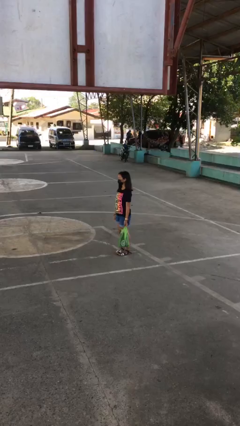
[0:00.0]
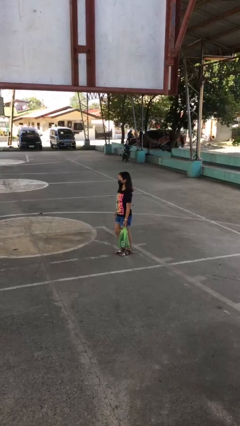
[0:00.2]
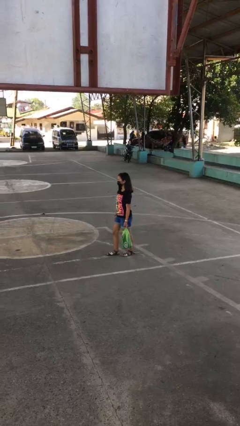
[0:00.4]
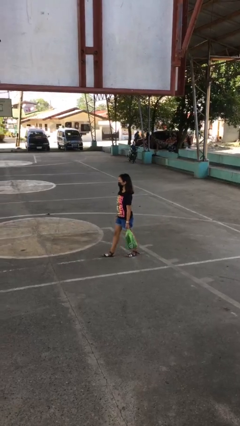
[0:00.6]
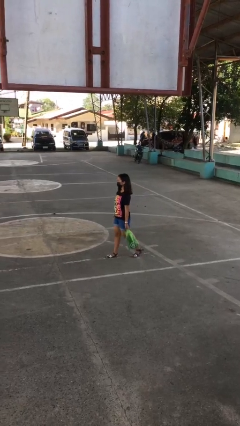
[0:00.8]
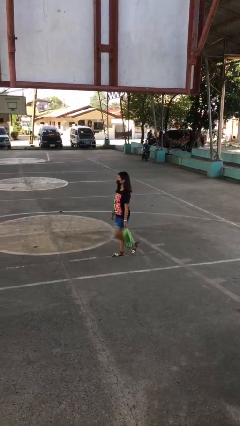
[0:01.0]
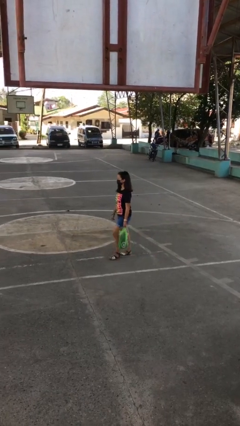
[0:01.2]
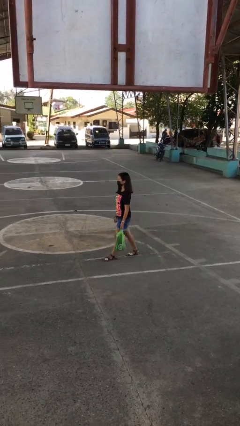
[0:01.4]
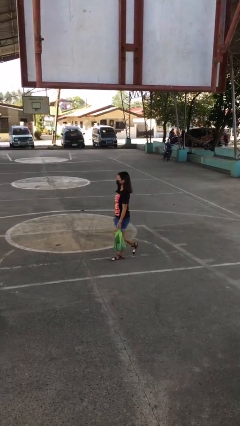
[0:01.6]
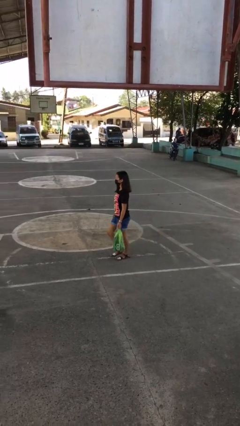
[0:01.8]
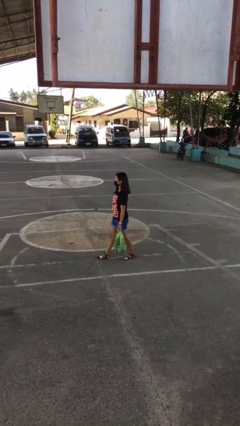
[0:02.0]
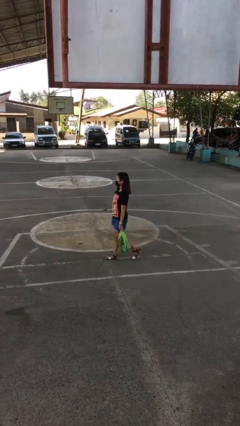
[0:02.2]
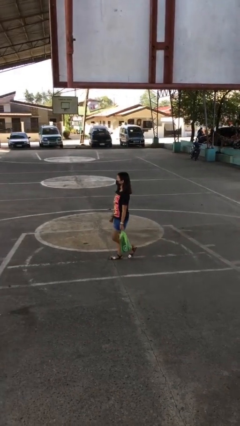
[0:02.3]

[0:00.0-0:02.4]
person carries groceries

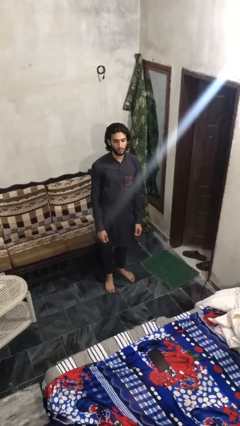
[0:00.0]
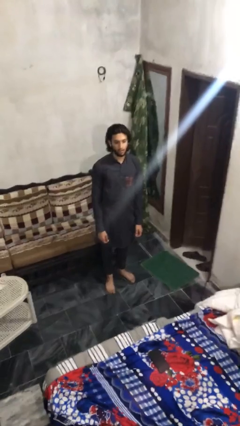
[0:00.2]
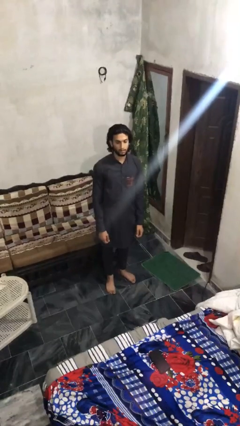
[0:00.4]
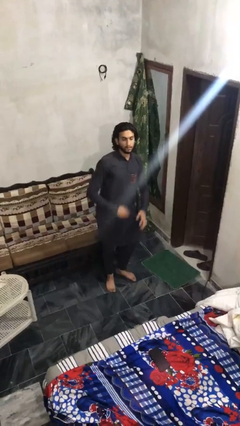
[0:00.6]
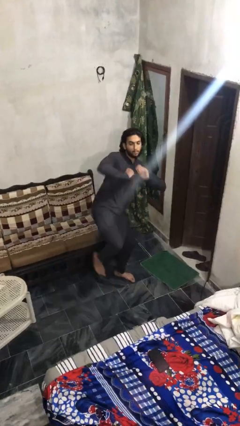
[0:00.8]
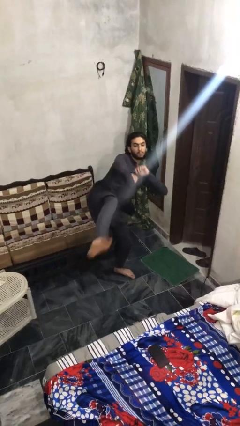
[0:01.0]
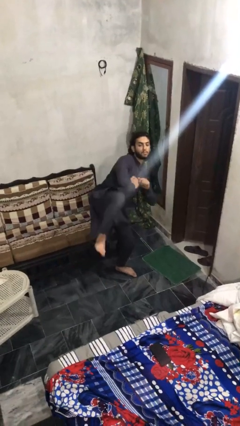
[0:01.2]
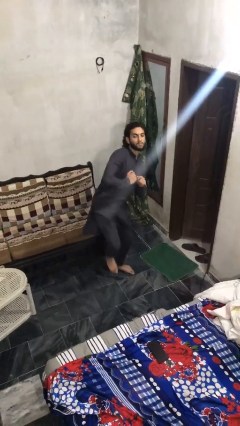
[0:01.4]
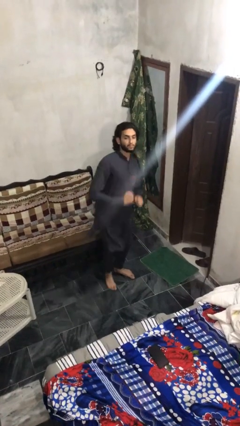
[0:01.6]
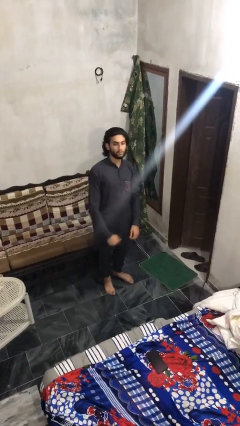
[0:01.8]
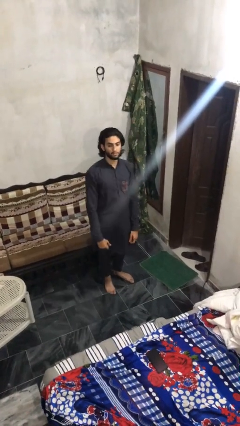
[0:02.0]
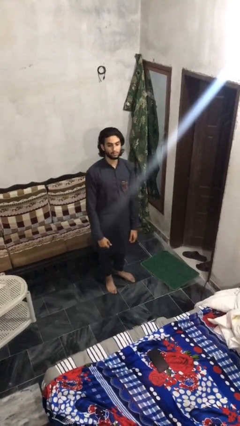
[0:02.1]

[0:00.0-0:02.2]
person karate kicks

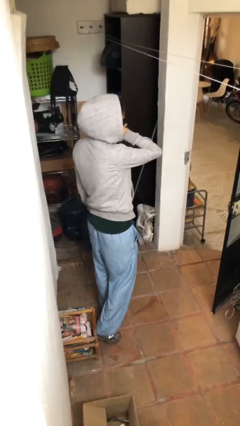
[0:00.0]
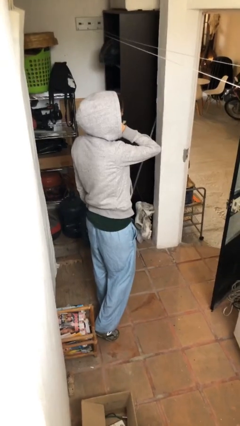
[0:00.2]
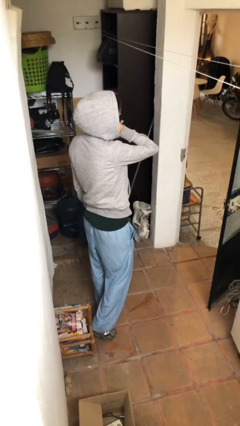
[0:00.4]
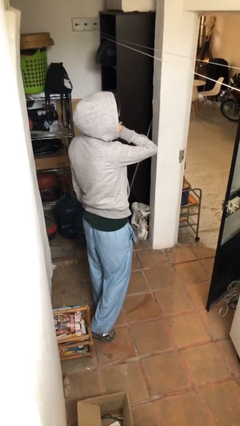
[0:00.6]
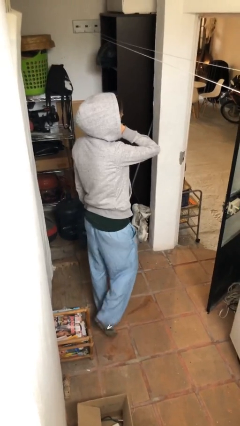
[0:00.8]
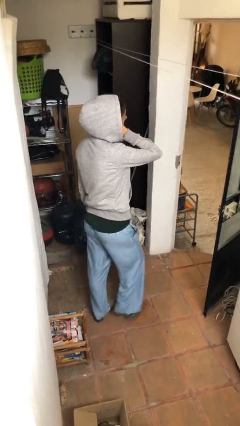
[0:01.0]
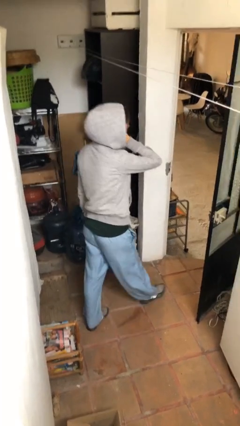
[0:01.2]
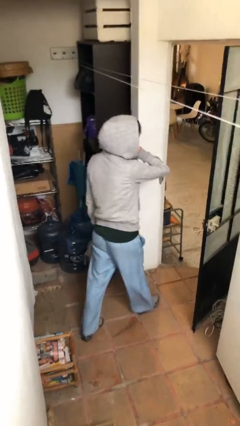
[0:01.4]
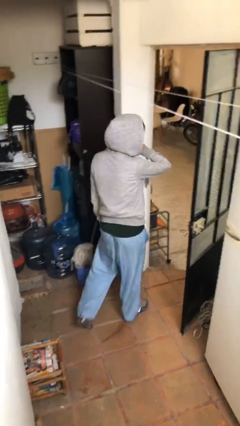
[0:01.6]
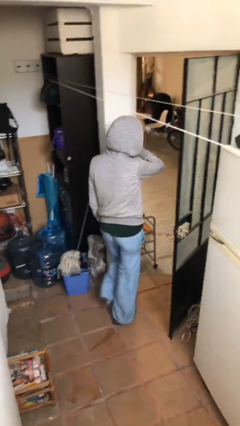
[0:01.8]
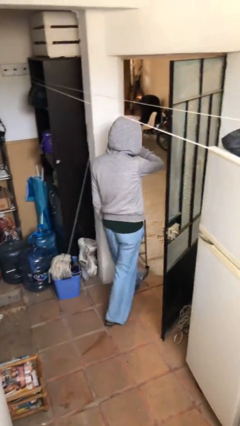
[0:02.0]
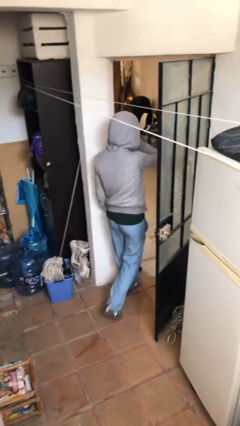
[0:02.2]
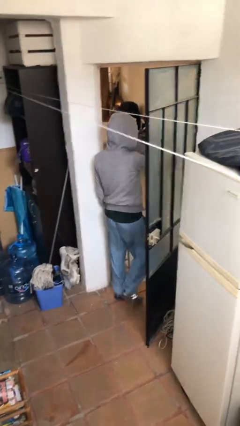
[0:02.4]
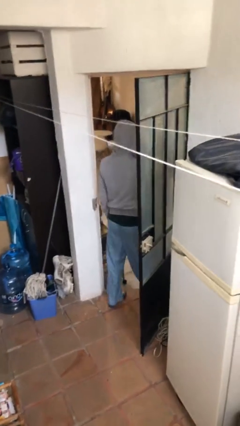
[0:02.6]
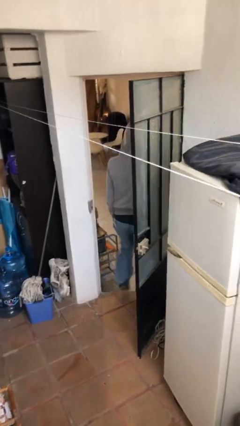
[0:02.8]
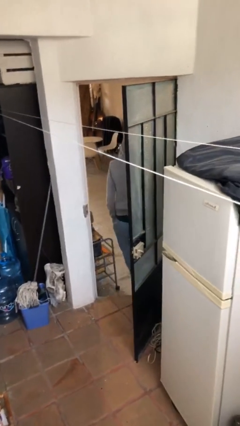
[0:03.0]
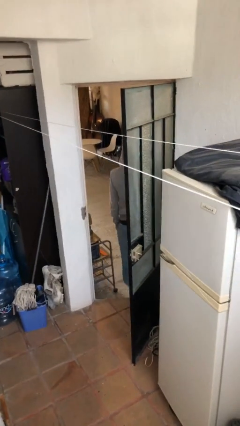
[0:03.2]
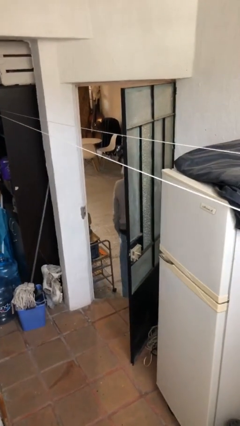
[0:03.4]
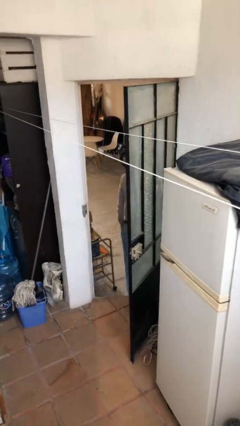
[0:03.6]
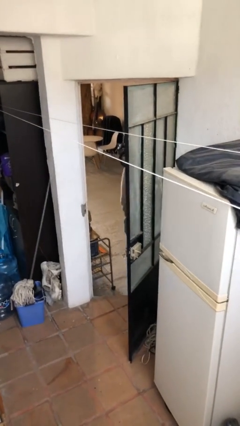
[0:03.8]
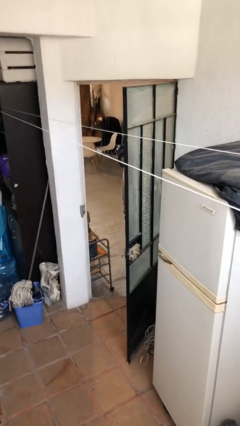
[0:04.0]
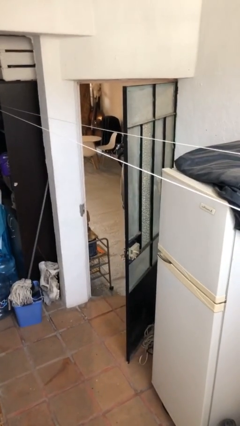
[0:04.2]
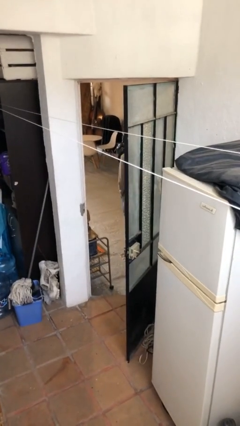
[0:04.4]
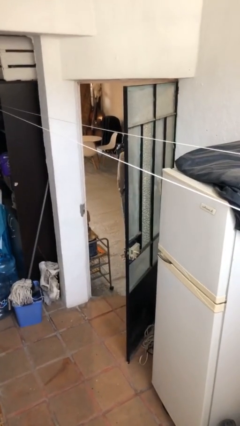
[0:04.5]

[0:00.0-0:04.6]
person exits scene through structure

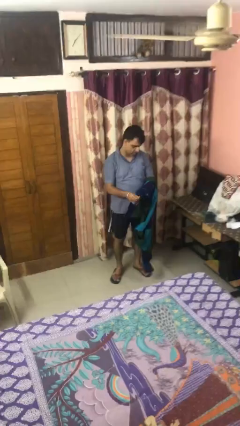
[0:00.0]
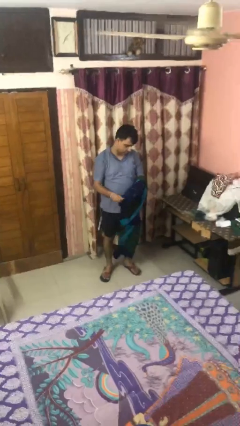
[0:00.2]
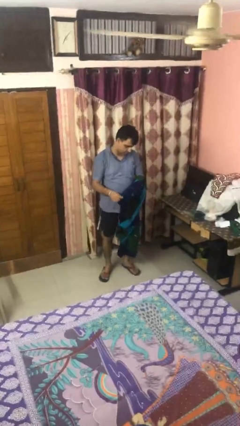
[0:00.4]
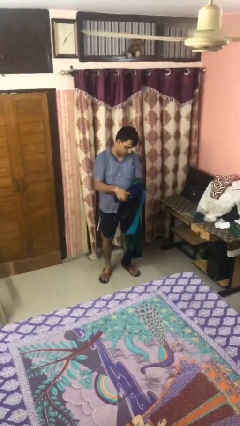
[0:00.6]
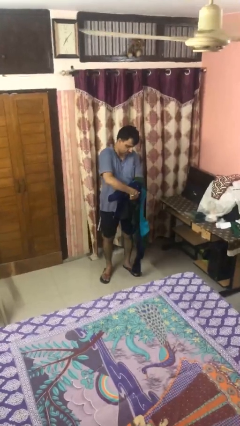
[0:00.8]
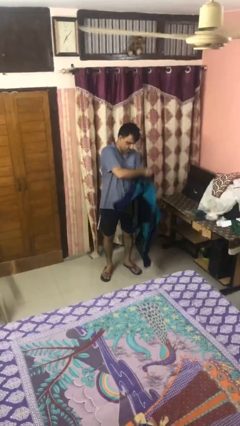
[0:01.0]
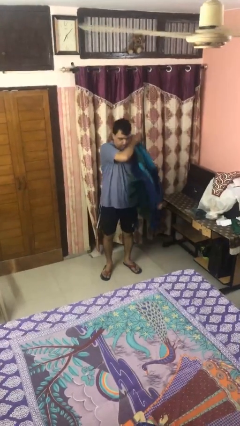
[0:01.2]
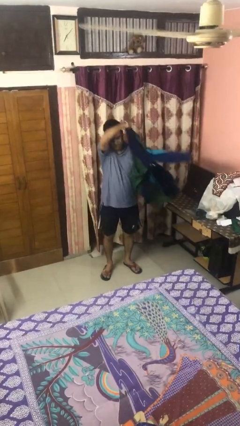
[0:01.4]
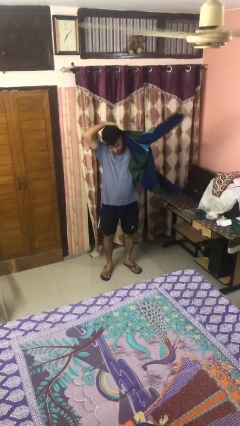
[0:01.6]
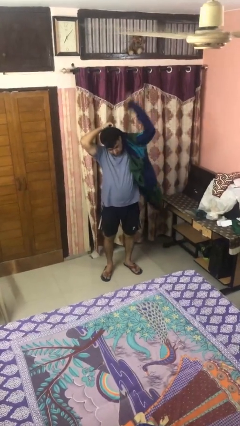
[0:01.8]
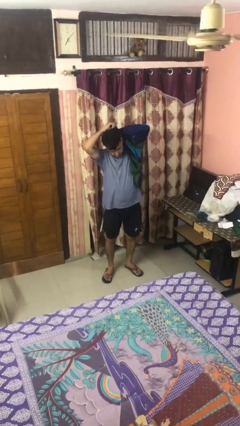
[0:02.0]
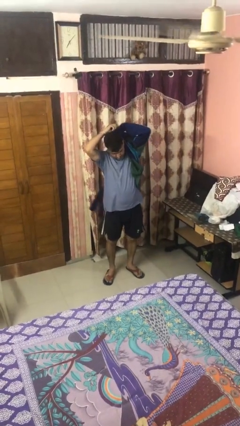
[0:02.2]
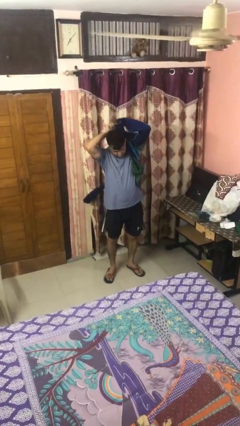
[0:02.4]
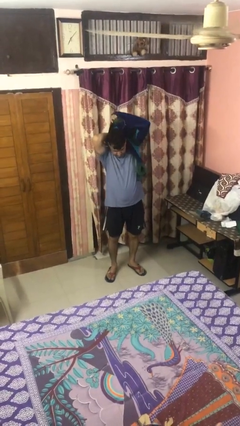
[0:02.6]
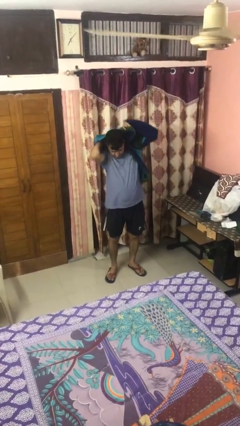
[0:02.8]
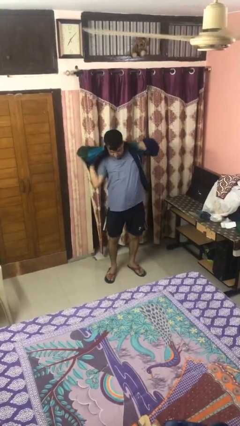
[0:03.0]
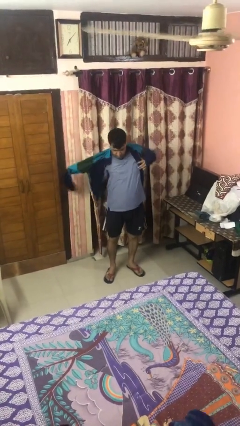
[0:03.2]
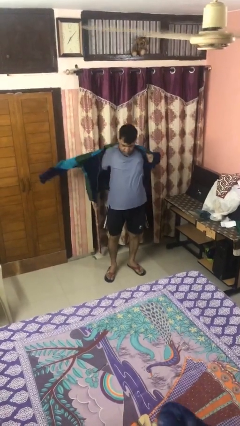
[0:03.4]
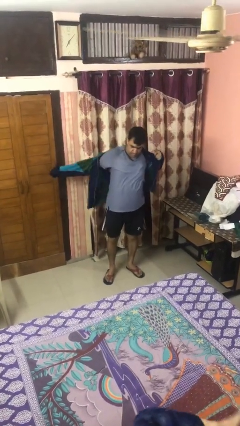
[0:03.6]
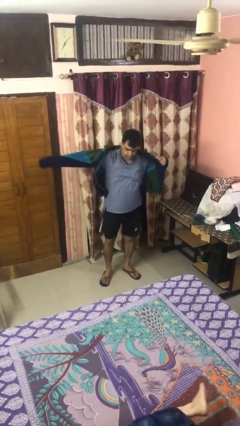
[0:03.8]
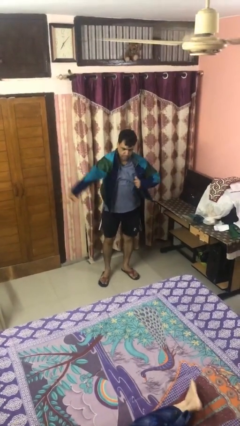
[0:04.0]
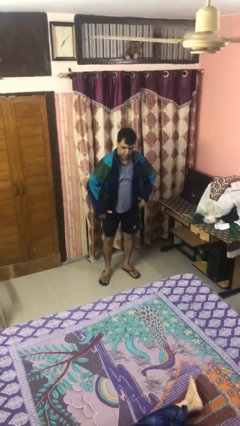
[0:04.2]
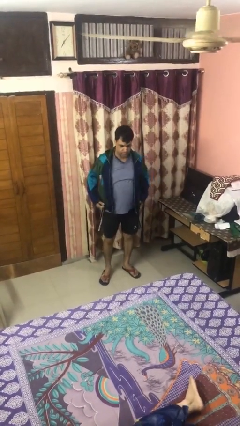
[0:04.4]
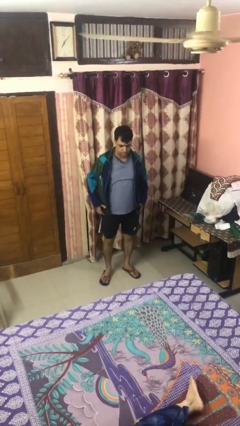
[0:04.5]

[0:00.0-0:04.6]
person puts on jacket

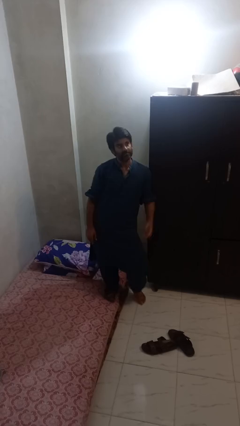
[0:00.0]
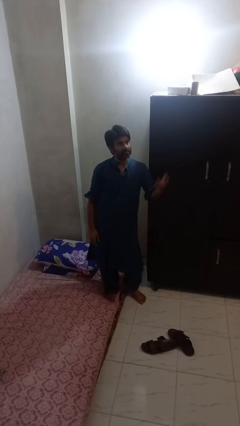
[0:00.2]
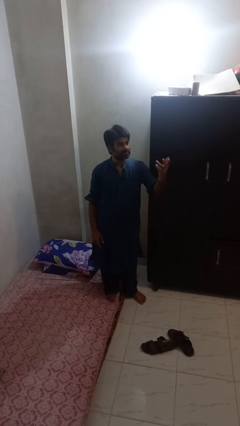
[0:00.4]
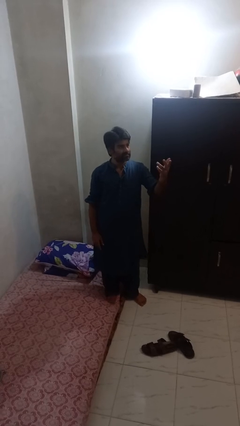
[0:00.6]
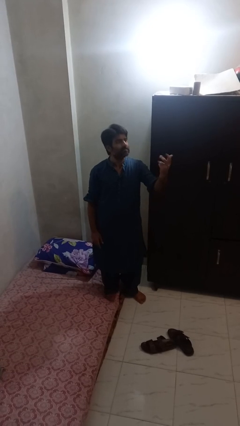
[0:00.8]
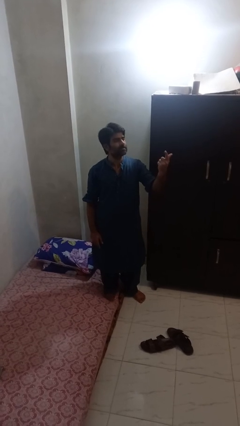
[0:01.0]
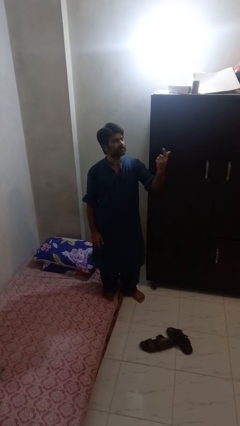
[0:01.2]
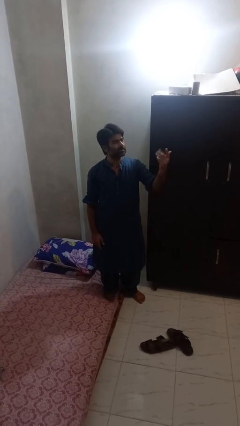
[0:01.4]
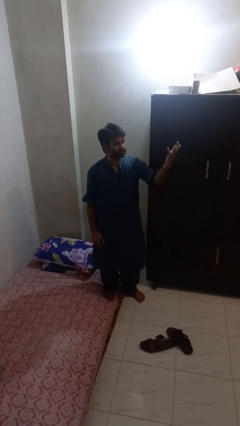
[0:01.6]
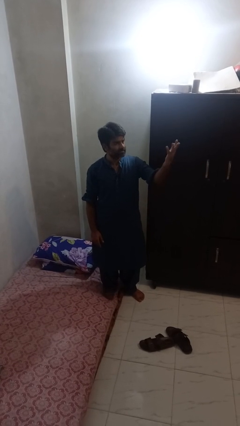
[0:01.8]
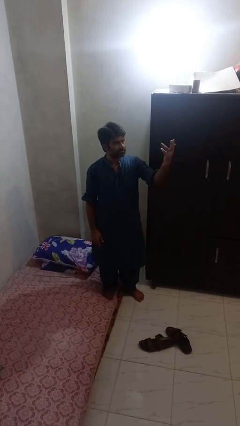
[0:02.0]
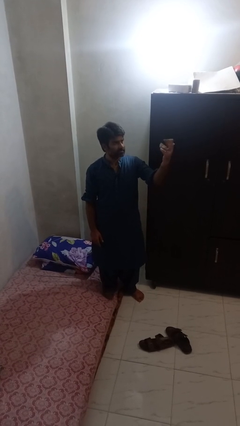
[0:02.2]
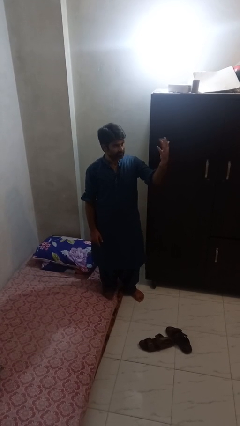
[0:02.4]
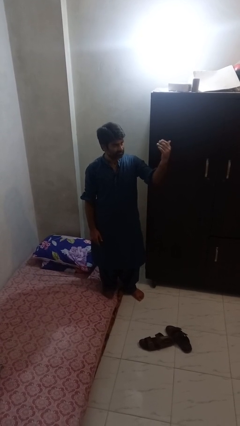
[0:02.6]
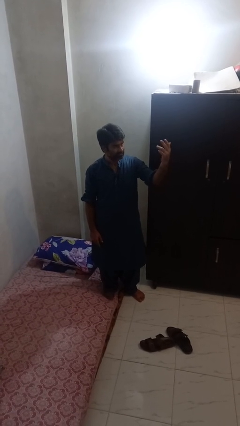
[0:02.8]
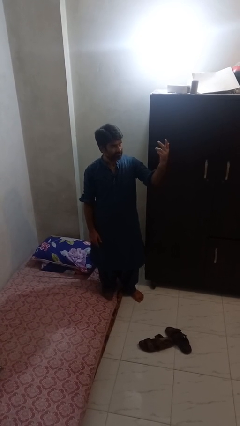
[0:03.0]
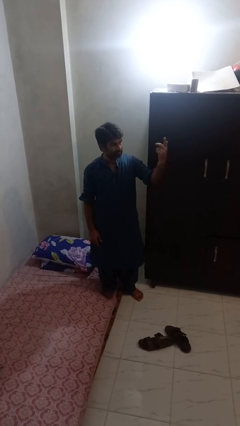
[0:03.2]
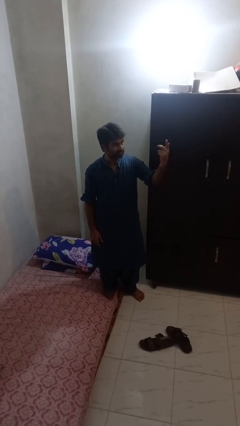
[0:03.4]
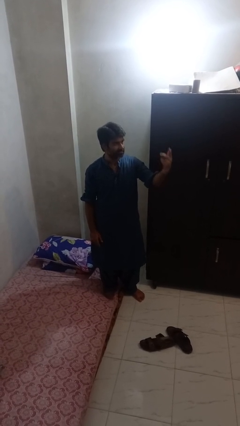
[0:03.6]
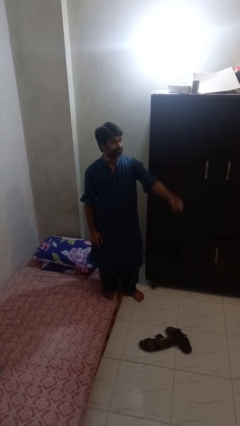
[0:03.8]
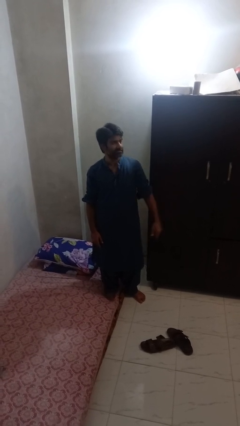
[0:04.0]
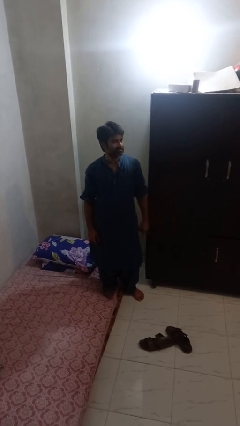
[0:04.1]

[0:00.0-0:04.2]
person gestures raise hand
